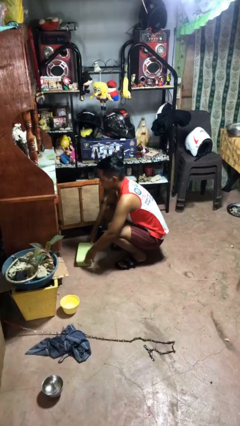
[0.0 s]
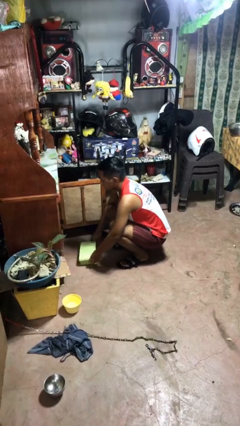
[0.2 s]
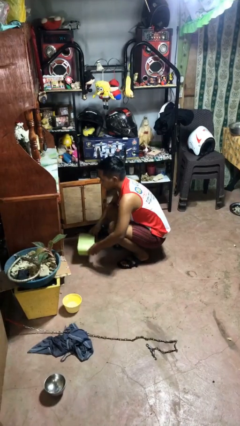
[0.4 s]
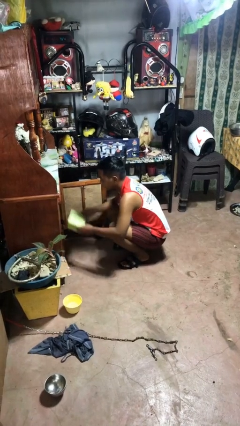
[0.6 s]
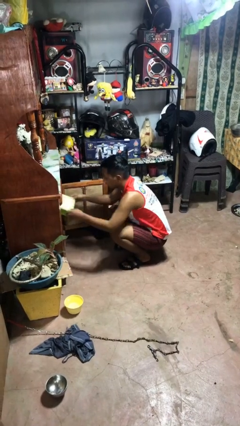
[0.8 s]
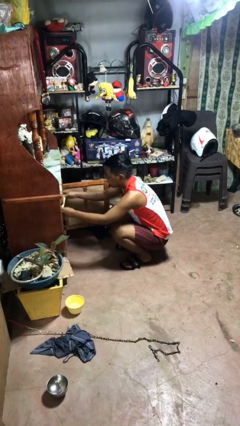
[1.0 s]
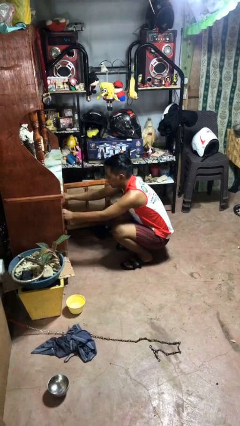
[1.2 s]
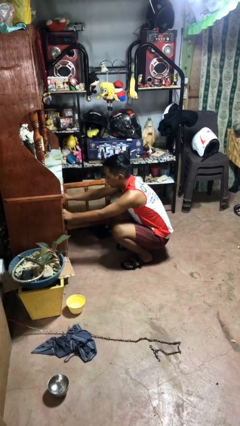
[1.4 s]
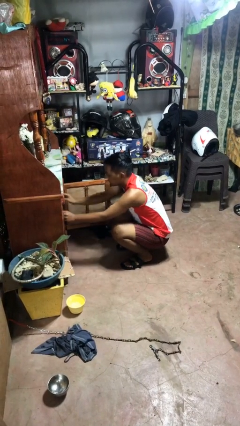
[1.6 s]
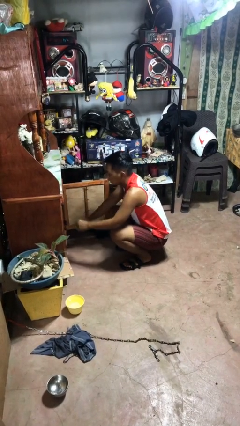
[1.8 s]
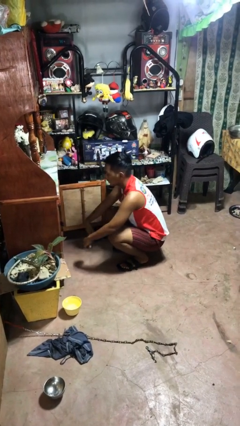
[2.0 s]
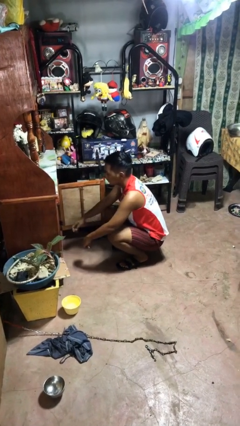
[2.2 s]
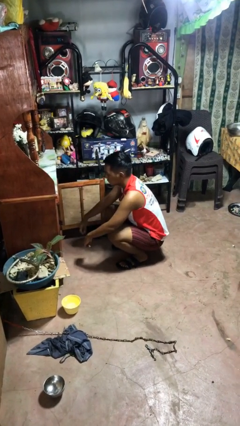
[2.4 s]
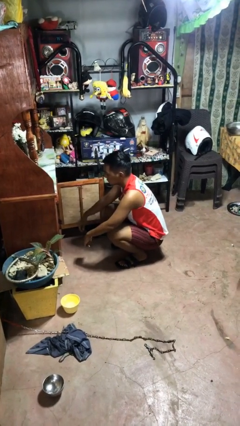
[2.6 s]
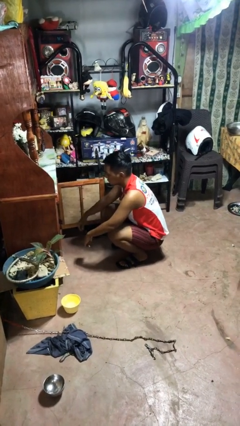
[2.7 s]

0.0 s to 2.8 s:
person puts object in cabinet

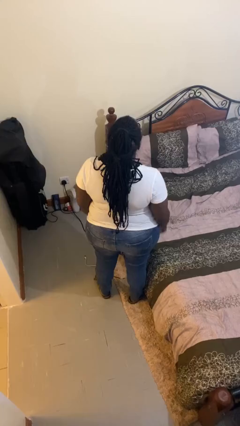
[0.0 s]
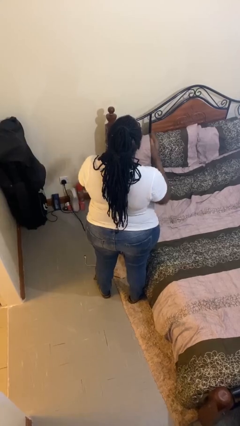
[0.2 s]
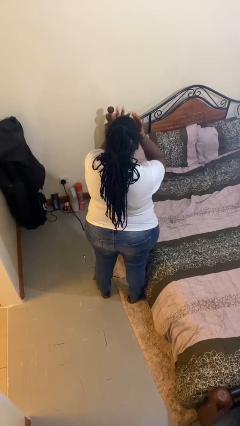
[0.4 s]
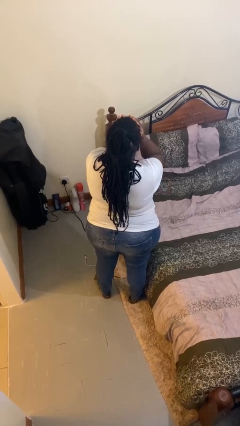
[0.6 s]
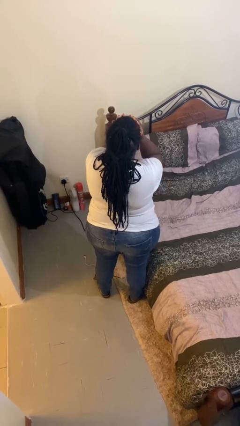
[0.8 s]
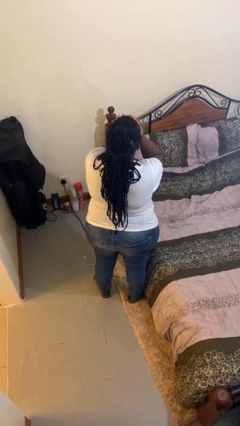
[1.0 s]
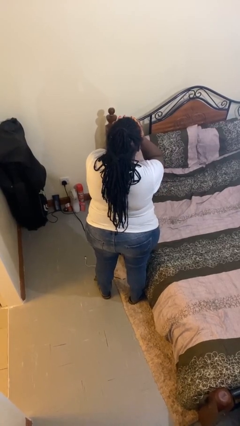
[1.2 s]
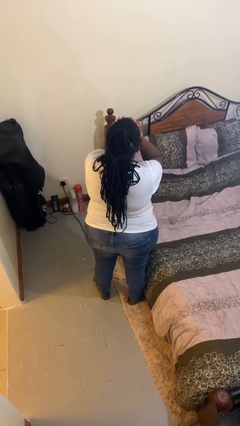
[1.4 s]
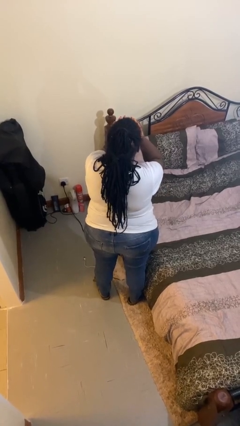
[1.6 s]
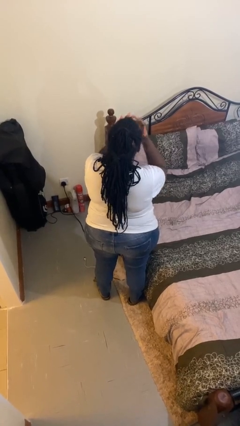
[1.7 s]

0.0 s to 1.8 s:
person covers face with hands

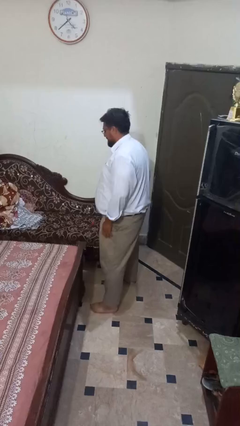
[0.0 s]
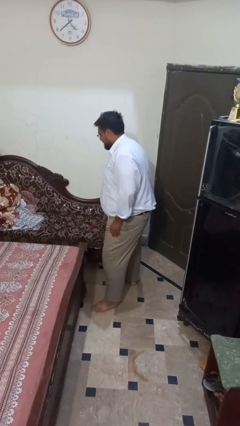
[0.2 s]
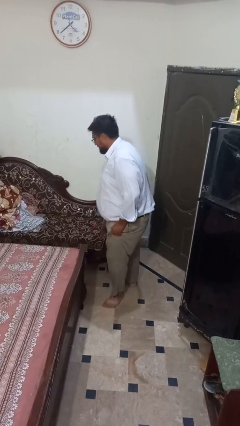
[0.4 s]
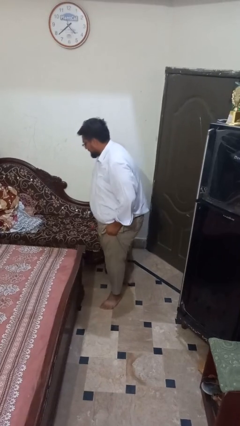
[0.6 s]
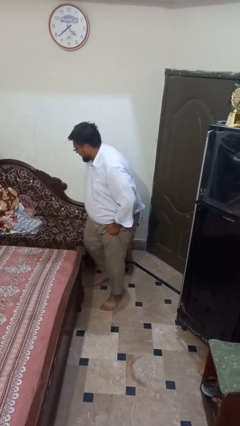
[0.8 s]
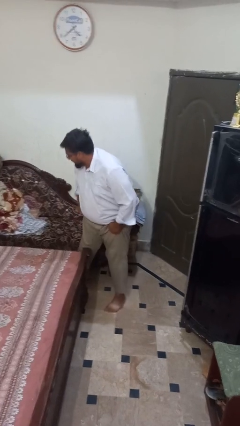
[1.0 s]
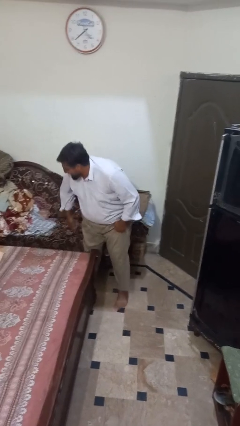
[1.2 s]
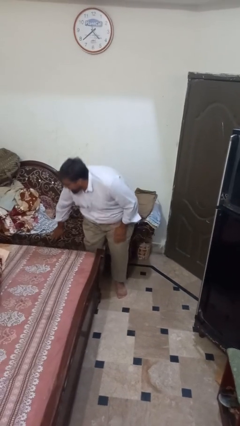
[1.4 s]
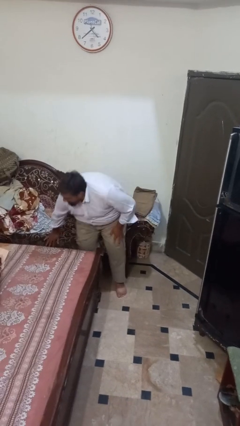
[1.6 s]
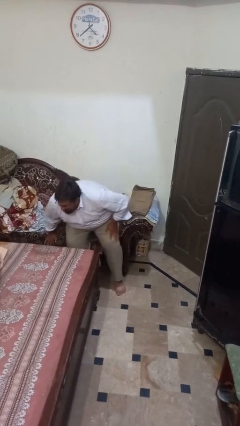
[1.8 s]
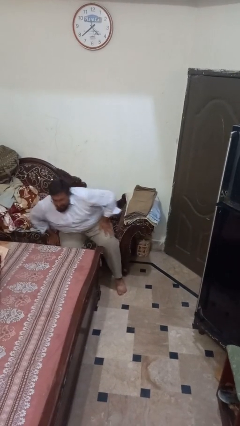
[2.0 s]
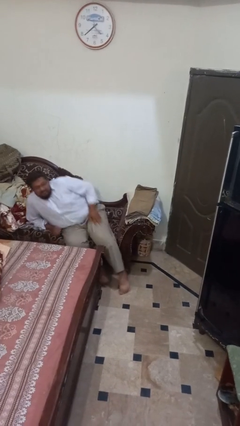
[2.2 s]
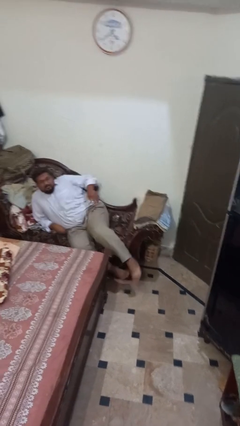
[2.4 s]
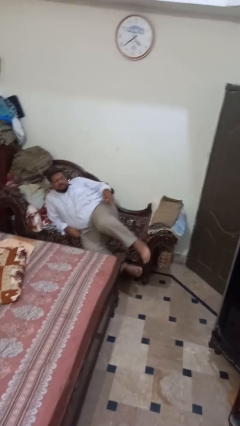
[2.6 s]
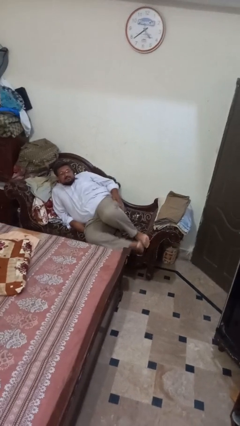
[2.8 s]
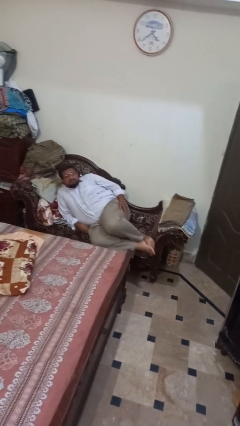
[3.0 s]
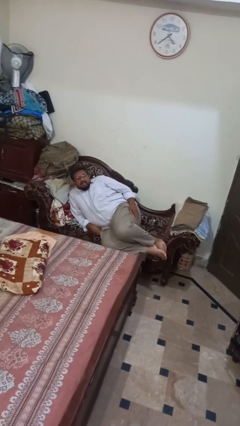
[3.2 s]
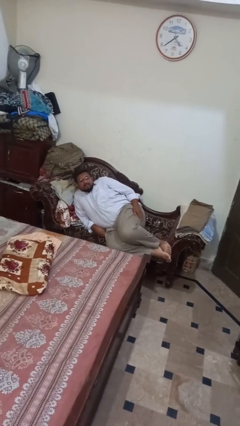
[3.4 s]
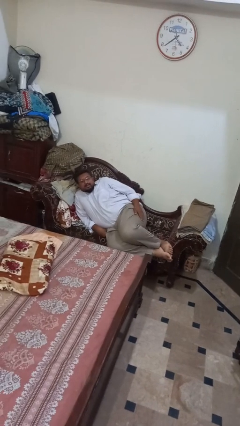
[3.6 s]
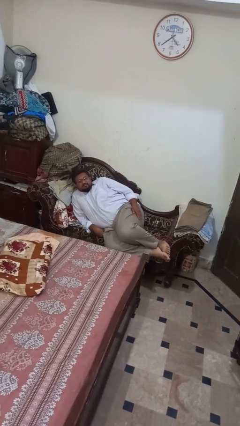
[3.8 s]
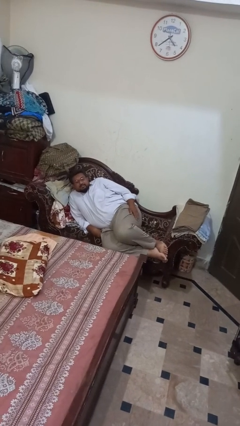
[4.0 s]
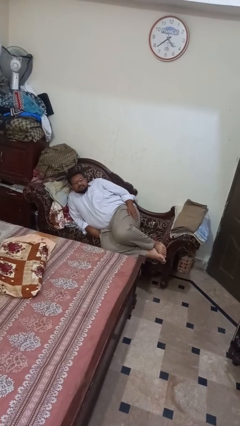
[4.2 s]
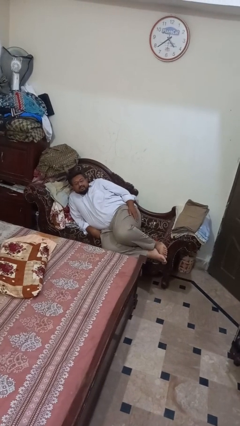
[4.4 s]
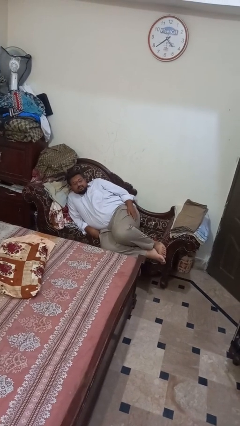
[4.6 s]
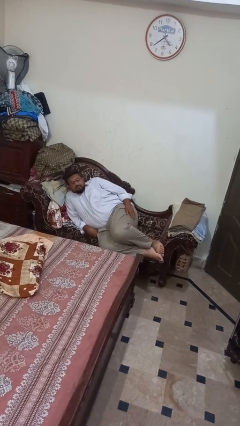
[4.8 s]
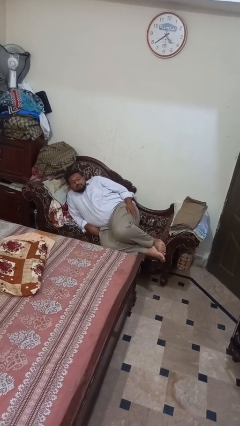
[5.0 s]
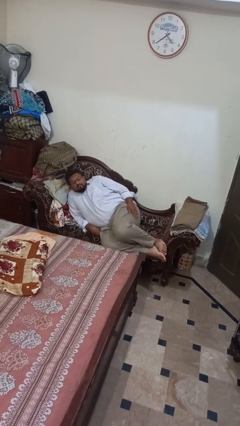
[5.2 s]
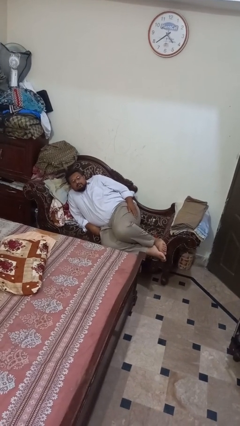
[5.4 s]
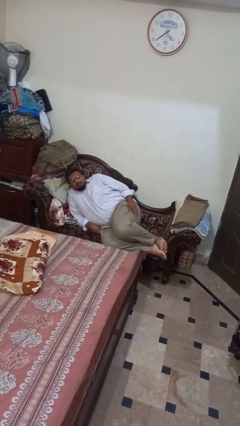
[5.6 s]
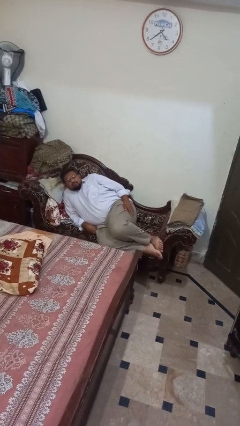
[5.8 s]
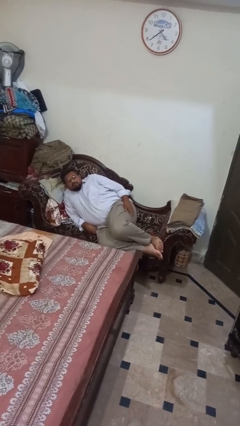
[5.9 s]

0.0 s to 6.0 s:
person lies down on couch

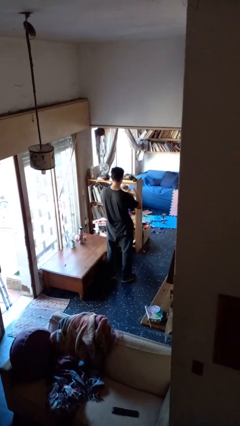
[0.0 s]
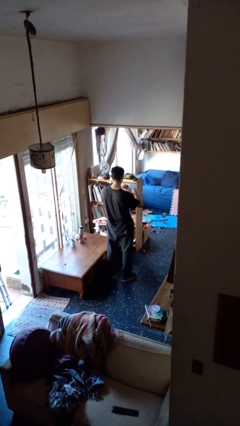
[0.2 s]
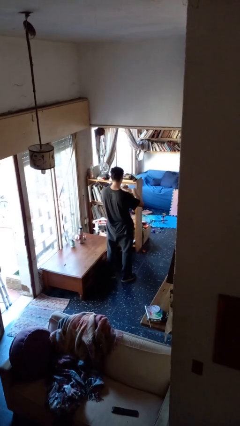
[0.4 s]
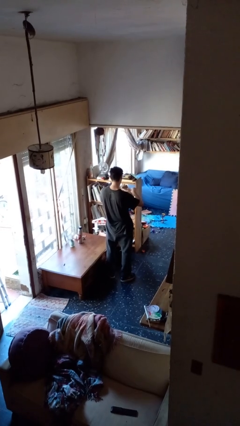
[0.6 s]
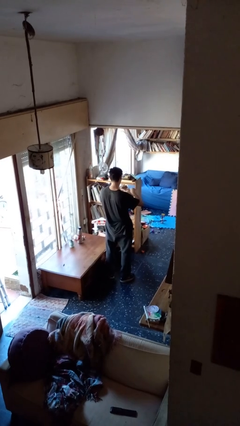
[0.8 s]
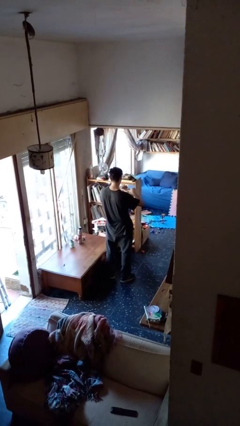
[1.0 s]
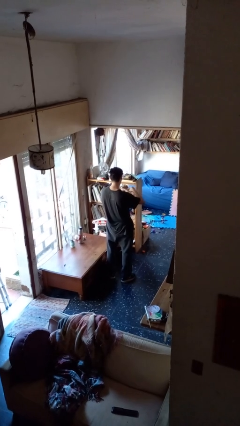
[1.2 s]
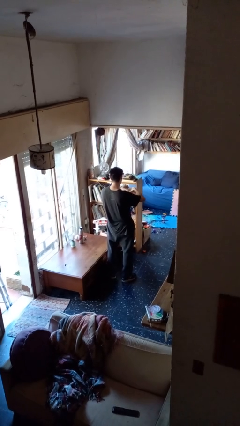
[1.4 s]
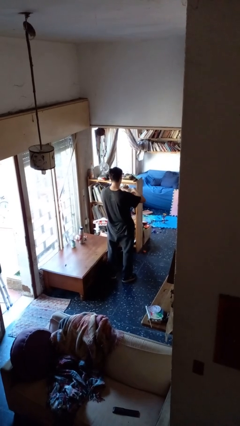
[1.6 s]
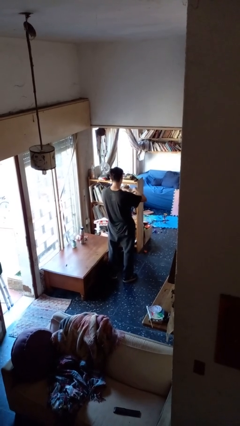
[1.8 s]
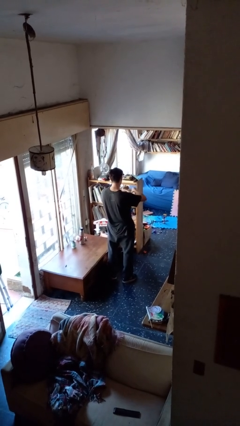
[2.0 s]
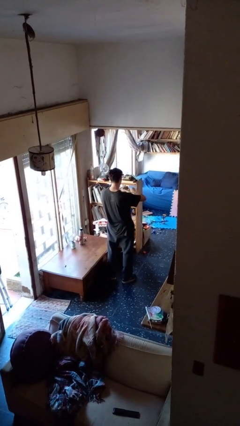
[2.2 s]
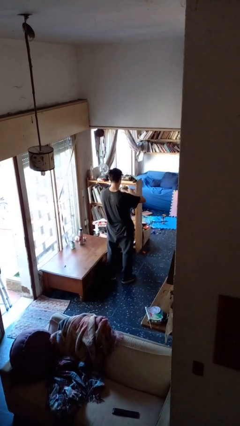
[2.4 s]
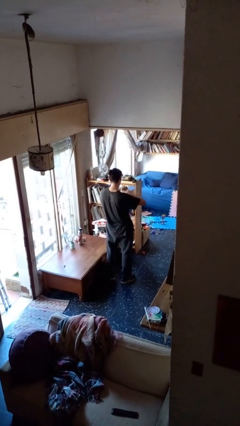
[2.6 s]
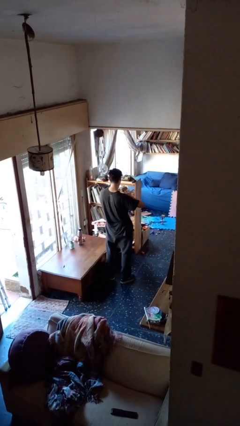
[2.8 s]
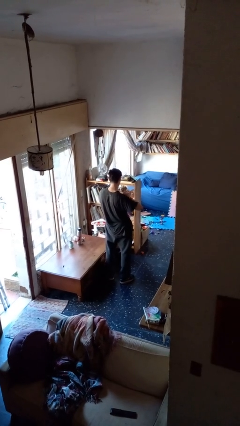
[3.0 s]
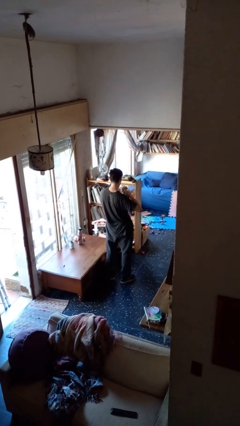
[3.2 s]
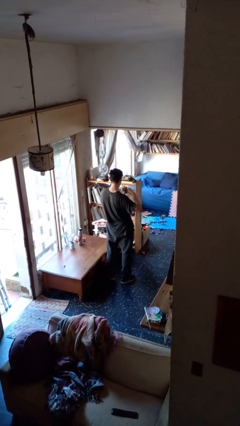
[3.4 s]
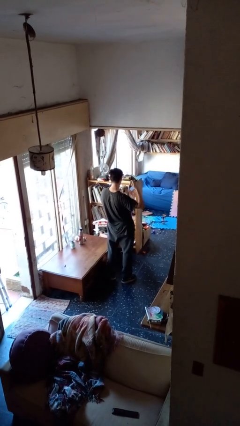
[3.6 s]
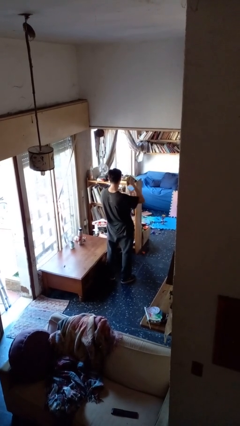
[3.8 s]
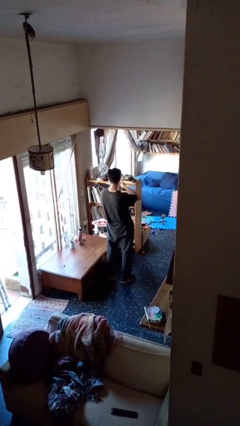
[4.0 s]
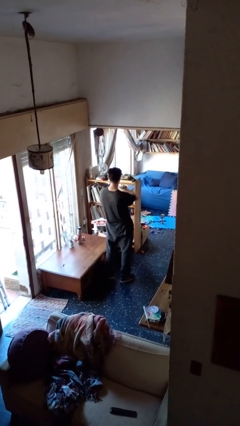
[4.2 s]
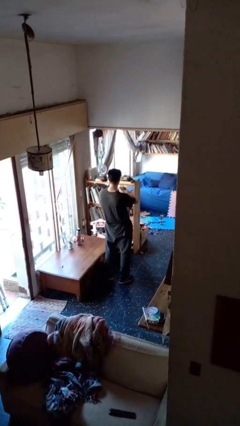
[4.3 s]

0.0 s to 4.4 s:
person tears paper

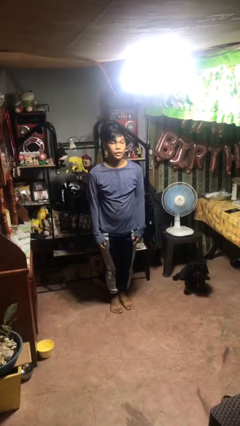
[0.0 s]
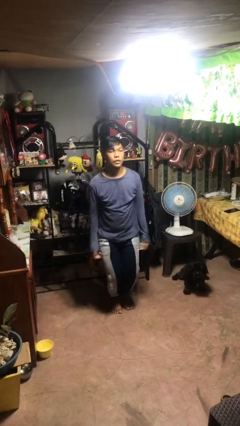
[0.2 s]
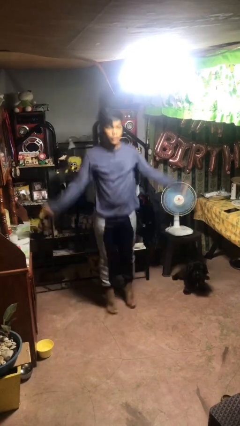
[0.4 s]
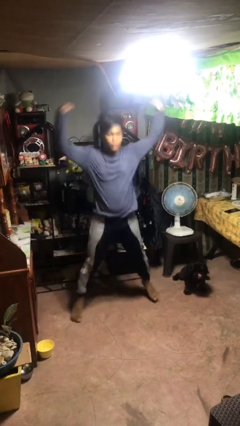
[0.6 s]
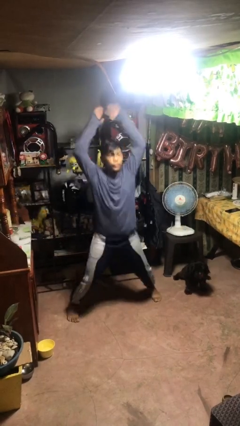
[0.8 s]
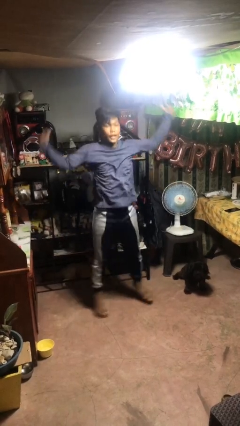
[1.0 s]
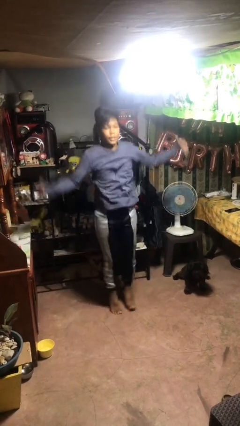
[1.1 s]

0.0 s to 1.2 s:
person exercises with jumping jacks

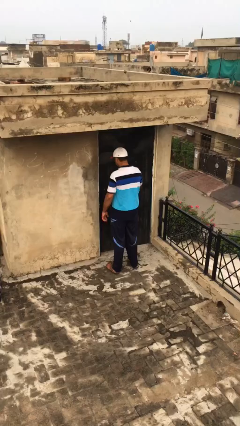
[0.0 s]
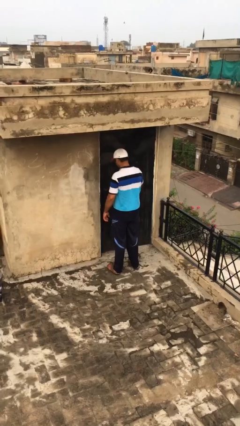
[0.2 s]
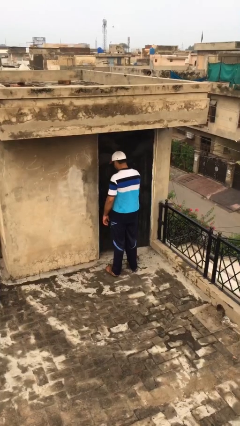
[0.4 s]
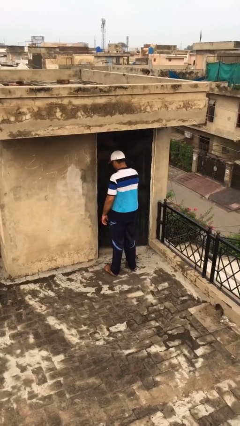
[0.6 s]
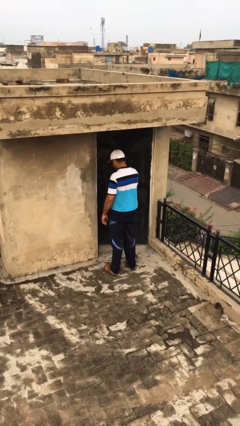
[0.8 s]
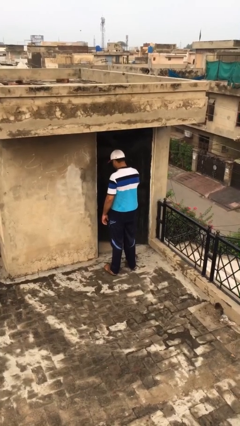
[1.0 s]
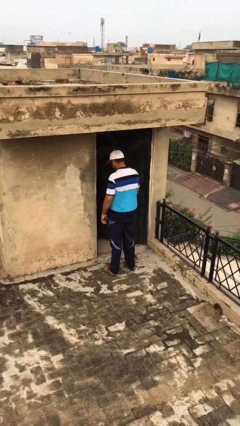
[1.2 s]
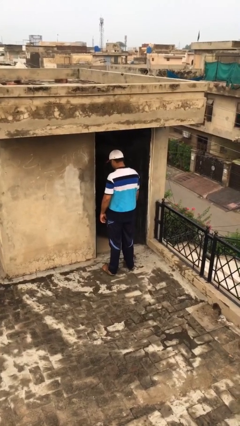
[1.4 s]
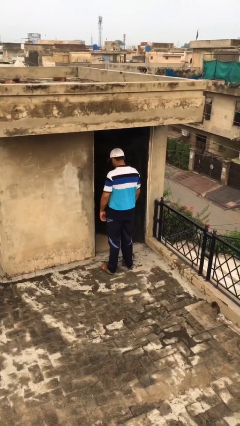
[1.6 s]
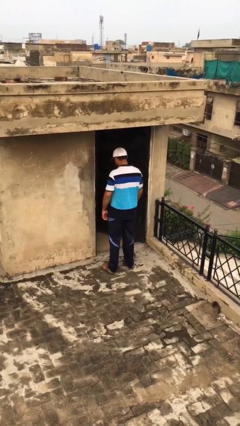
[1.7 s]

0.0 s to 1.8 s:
person opens facility door
